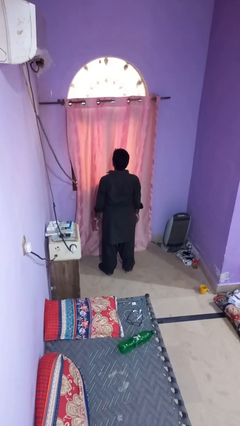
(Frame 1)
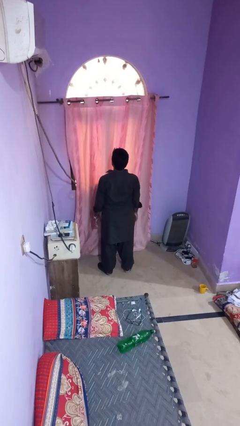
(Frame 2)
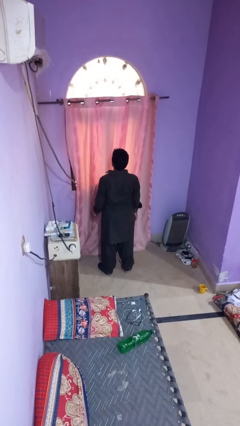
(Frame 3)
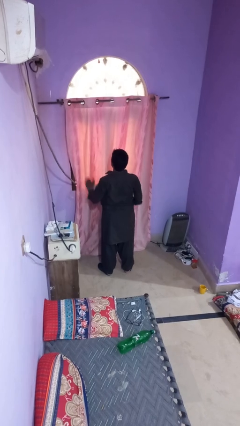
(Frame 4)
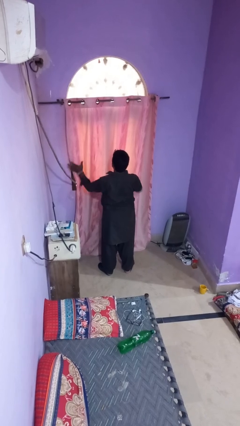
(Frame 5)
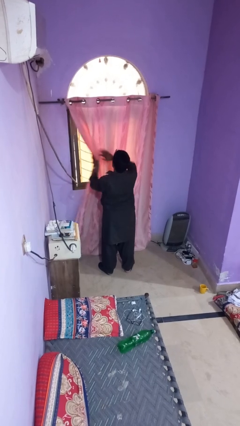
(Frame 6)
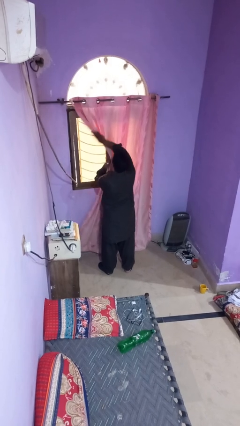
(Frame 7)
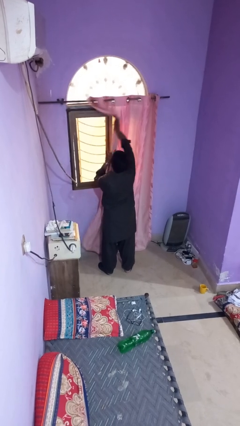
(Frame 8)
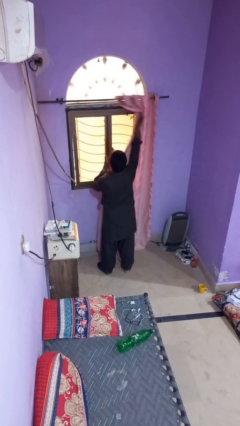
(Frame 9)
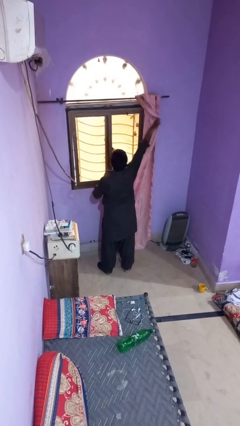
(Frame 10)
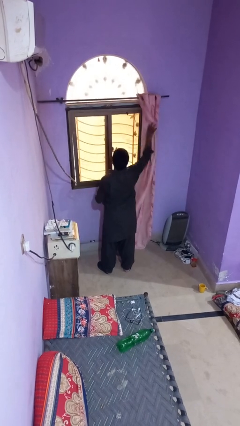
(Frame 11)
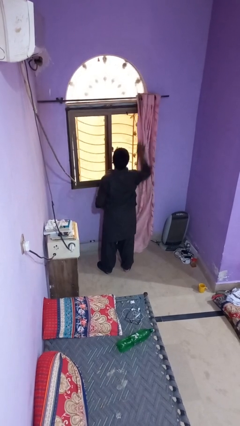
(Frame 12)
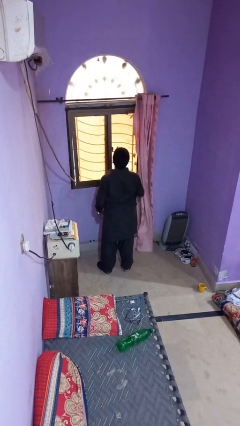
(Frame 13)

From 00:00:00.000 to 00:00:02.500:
person opens curtains

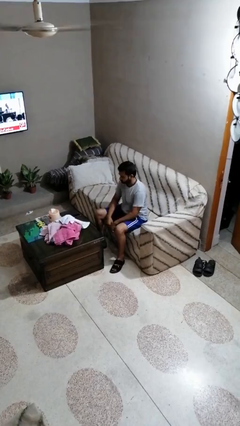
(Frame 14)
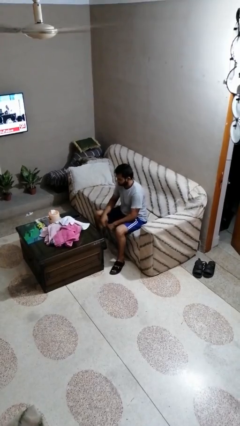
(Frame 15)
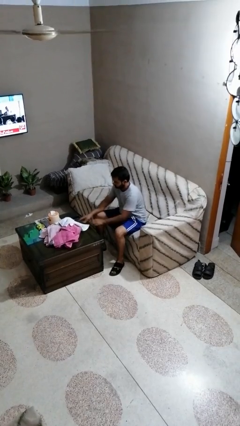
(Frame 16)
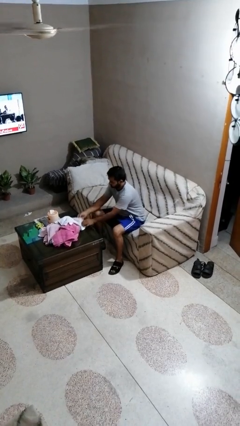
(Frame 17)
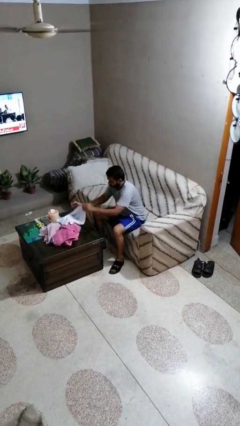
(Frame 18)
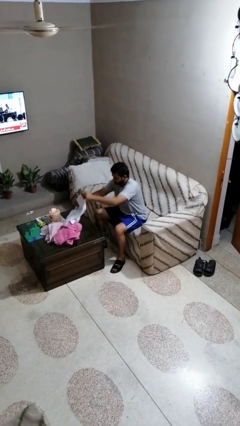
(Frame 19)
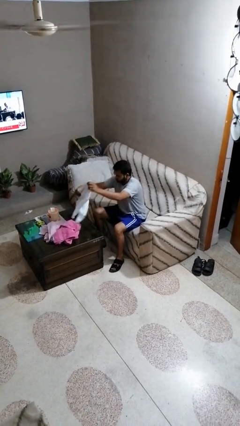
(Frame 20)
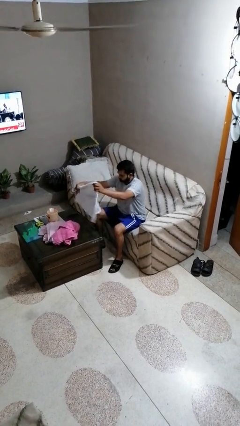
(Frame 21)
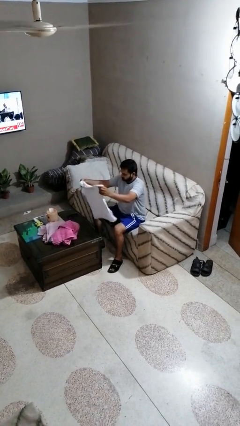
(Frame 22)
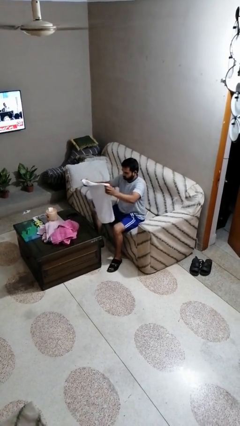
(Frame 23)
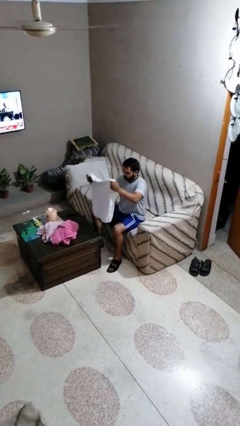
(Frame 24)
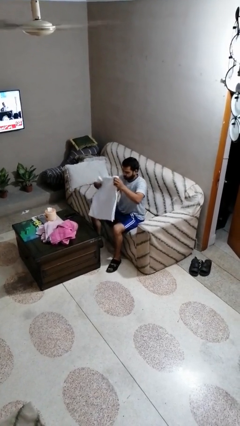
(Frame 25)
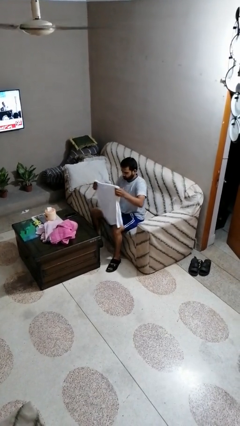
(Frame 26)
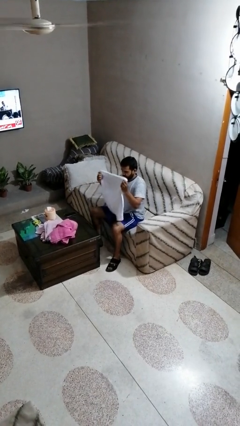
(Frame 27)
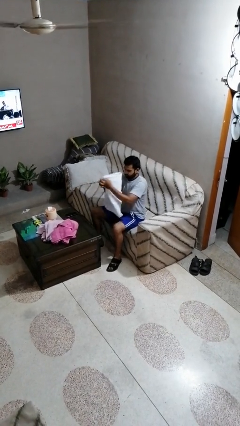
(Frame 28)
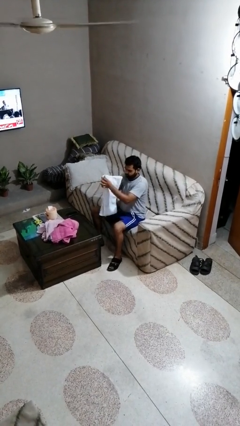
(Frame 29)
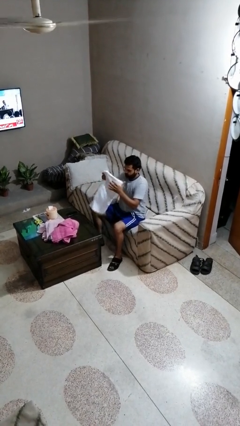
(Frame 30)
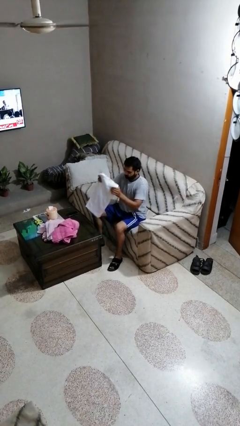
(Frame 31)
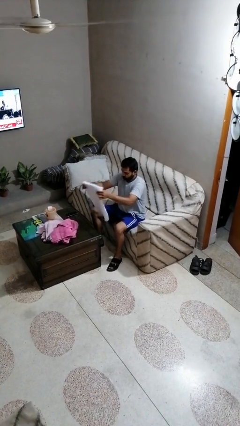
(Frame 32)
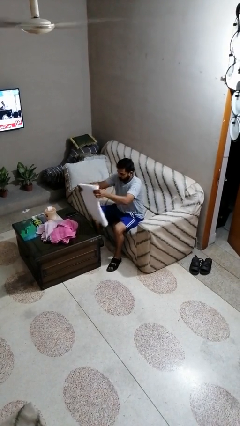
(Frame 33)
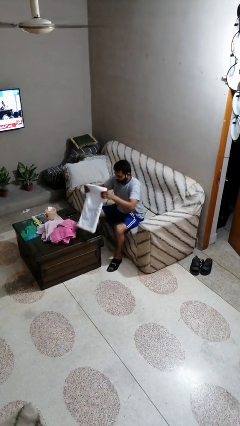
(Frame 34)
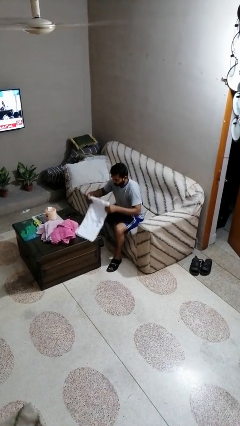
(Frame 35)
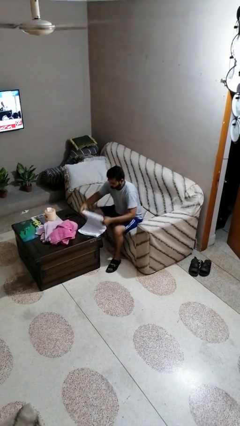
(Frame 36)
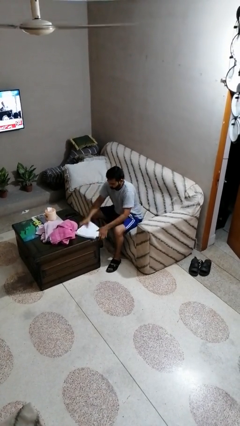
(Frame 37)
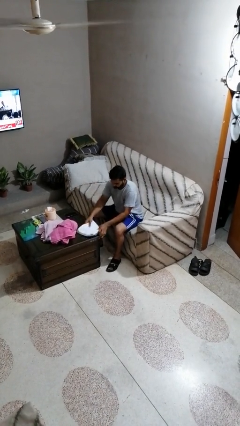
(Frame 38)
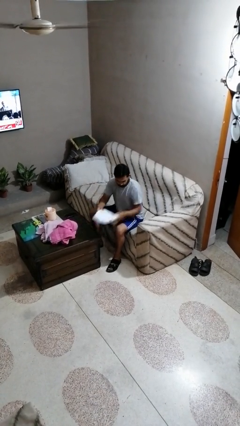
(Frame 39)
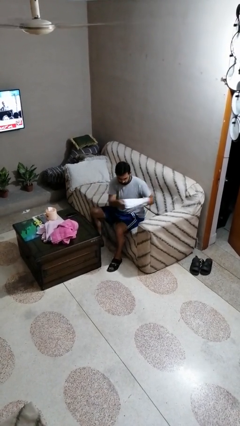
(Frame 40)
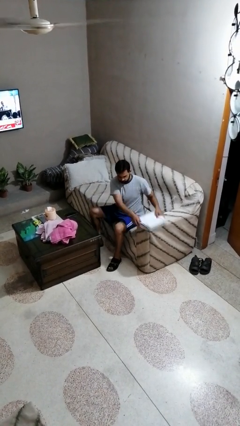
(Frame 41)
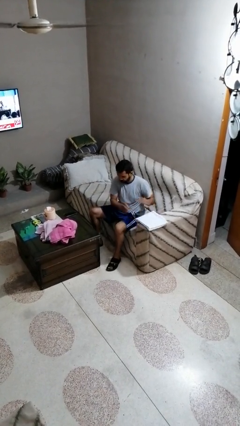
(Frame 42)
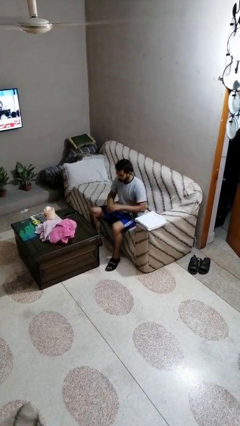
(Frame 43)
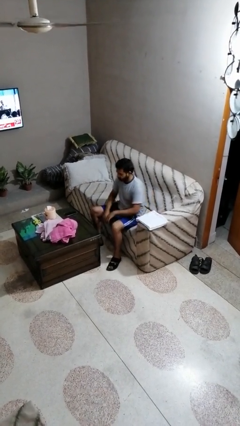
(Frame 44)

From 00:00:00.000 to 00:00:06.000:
person folds towel

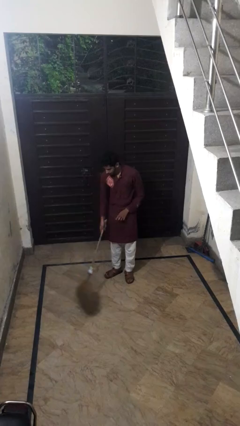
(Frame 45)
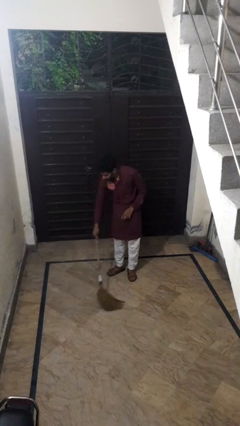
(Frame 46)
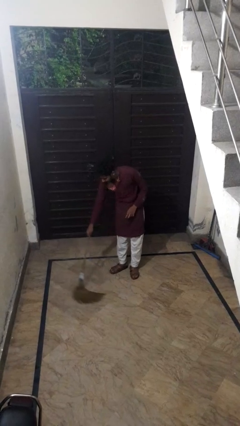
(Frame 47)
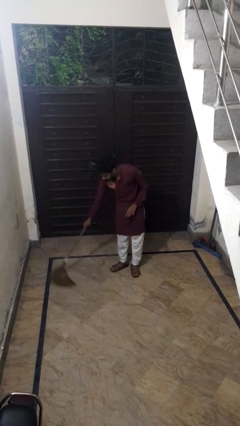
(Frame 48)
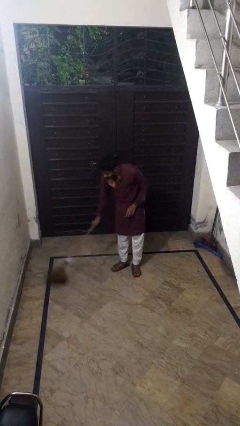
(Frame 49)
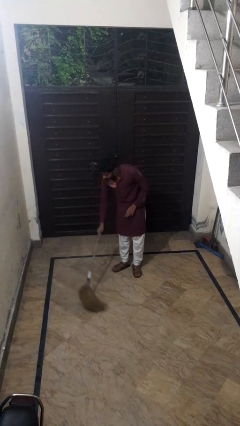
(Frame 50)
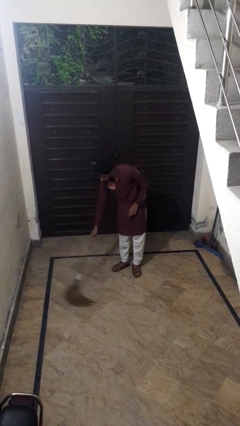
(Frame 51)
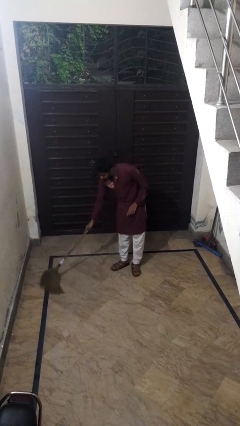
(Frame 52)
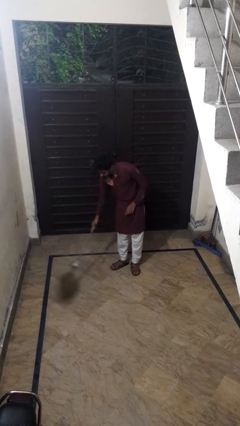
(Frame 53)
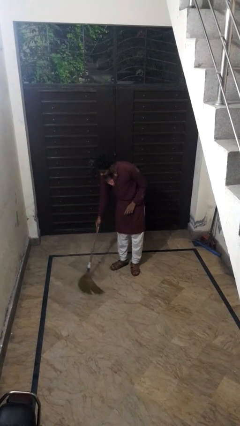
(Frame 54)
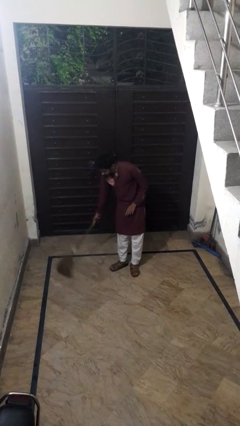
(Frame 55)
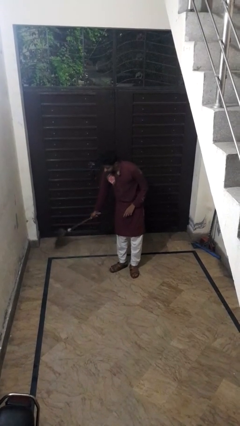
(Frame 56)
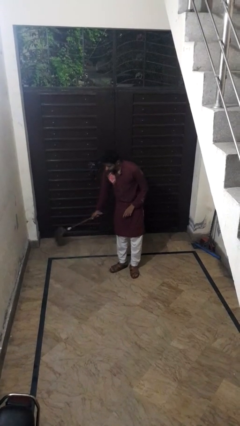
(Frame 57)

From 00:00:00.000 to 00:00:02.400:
person sweeps floor

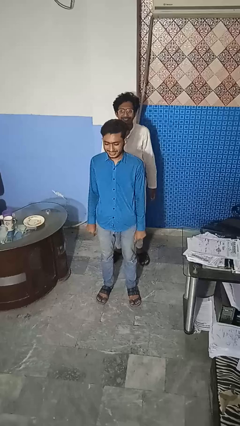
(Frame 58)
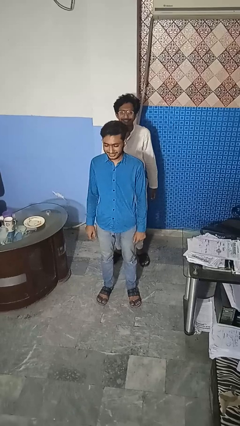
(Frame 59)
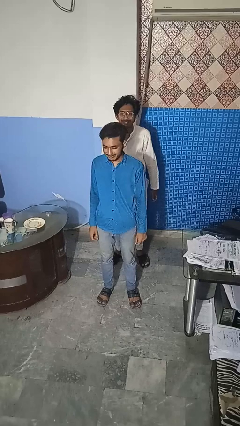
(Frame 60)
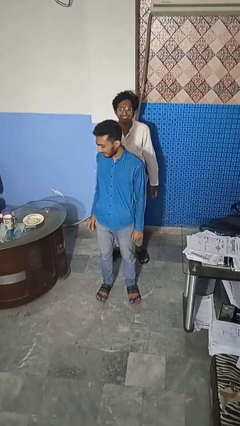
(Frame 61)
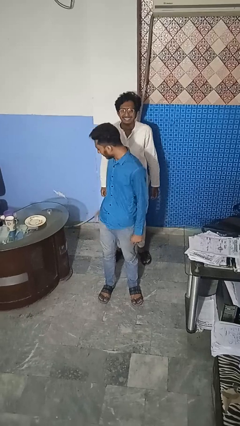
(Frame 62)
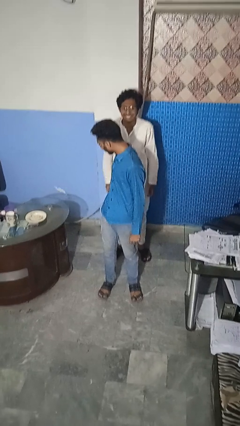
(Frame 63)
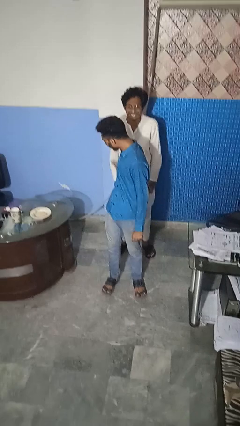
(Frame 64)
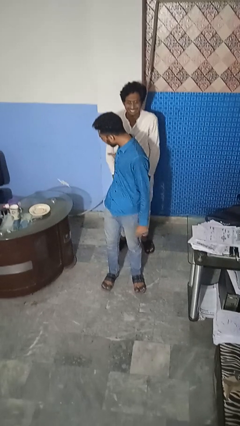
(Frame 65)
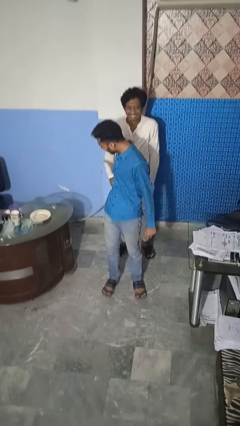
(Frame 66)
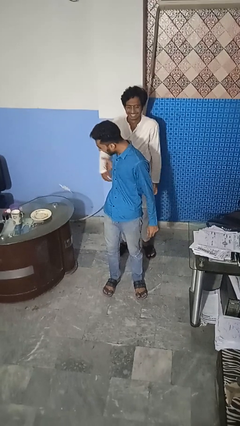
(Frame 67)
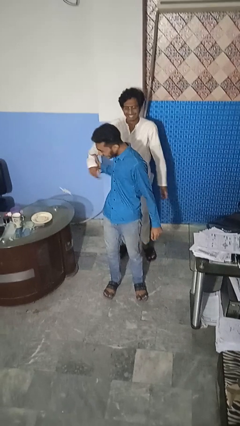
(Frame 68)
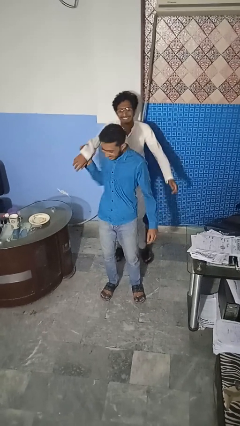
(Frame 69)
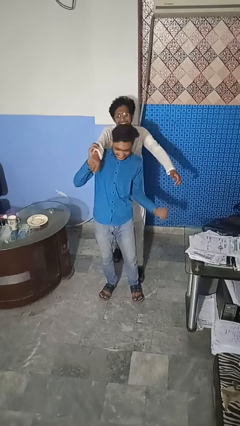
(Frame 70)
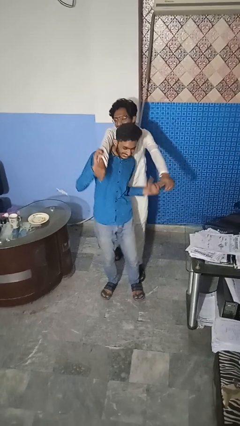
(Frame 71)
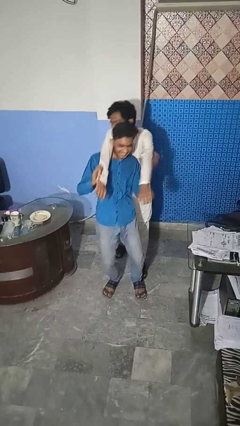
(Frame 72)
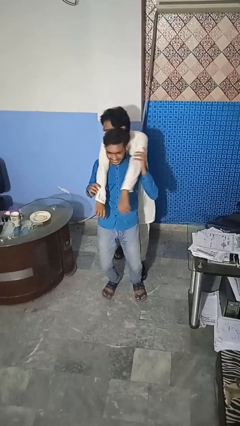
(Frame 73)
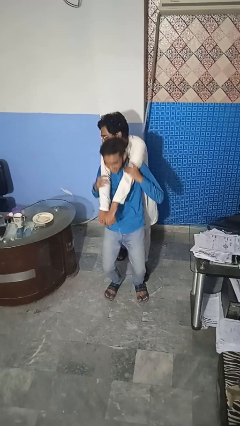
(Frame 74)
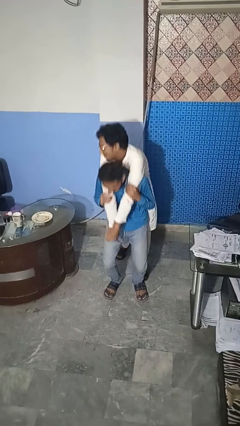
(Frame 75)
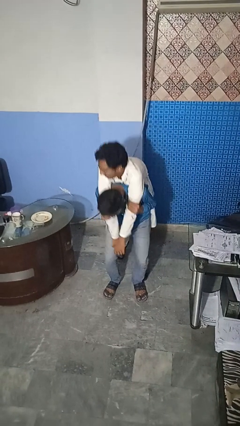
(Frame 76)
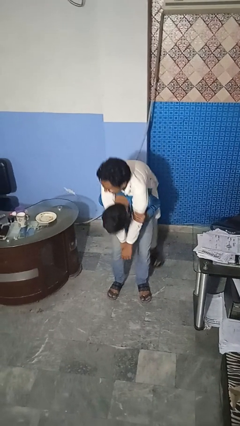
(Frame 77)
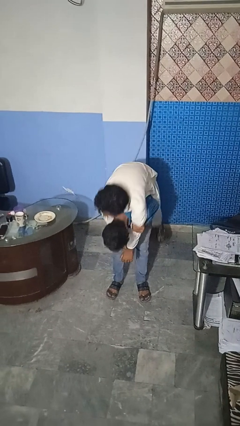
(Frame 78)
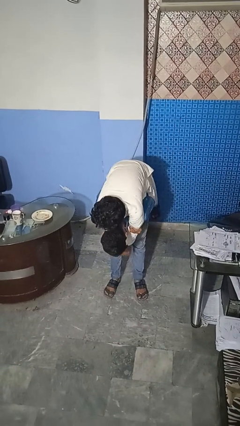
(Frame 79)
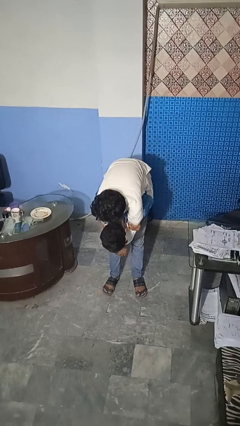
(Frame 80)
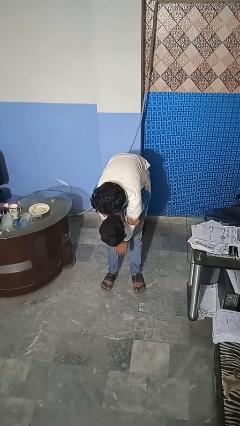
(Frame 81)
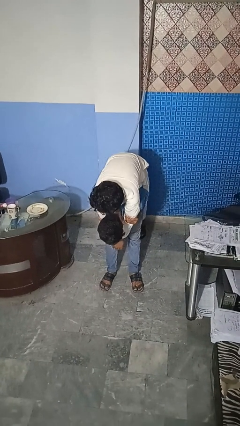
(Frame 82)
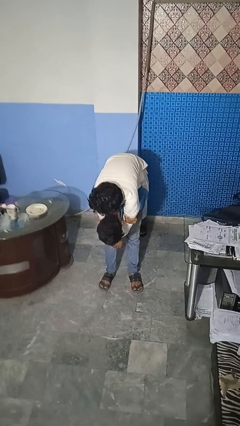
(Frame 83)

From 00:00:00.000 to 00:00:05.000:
person carries person over shoulder

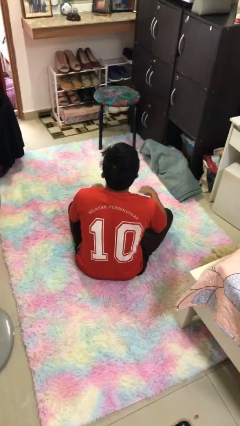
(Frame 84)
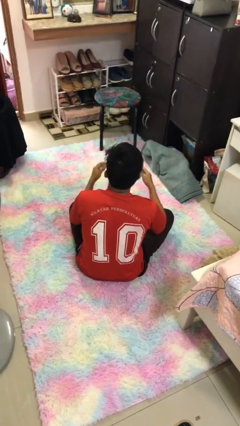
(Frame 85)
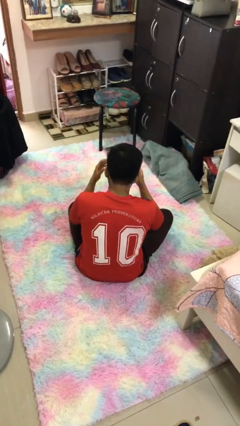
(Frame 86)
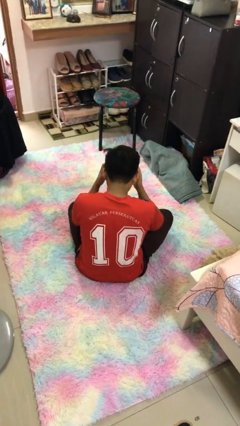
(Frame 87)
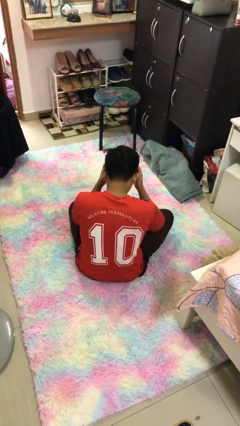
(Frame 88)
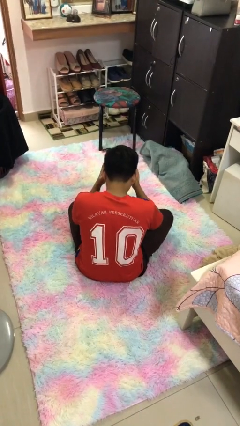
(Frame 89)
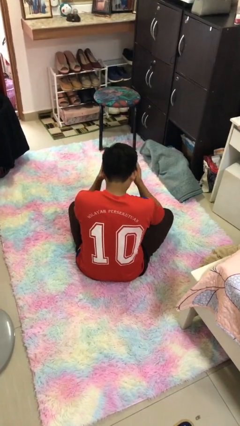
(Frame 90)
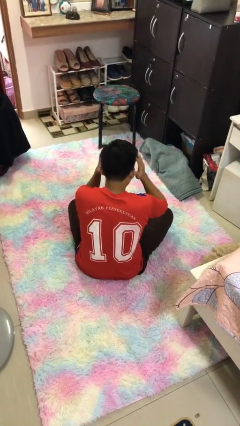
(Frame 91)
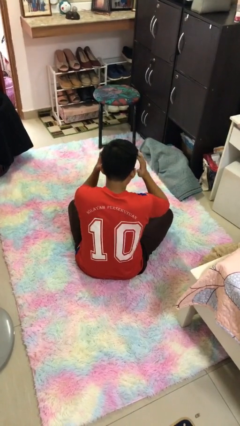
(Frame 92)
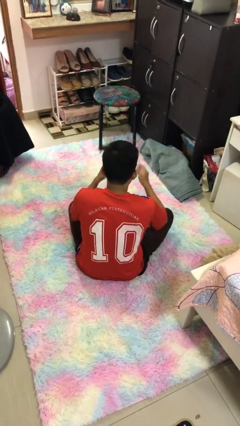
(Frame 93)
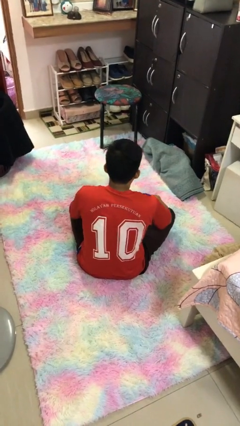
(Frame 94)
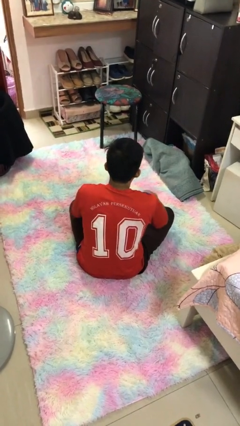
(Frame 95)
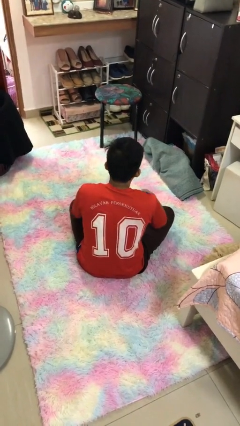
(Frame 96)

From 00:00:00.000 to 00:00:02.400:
person covers face with hands
